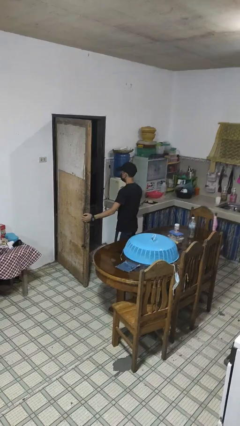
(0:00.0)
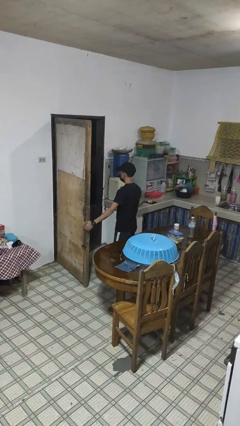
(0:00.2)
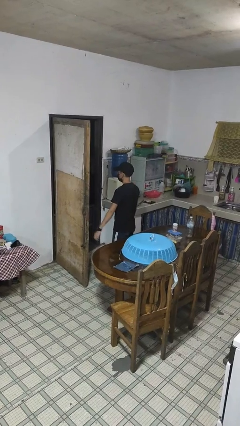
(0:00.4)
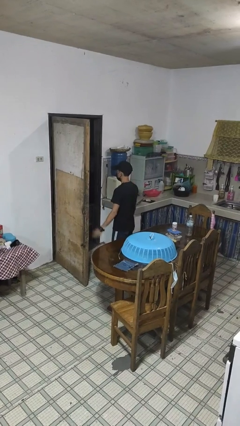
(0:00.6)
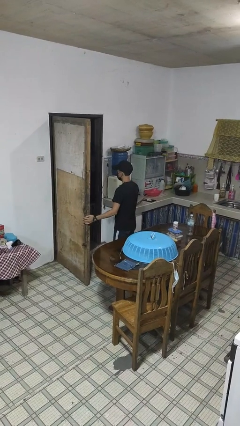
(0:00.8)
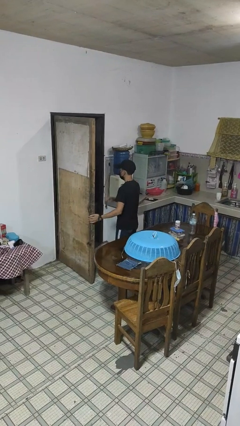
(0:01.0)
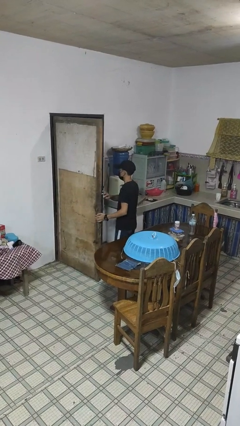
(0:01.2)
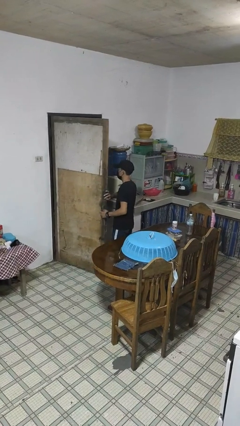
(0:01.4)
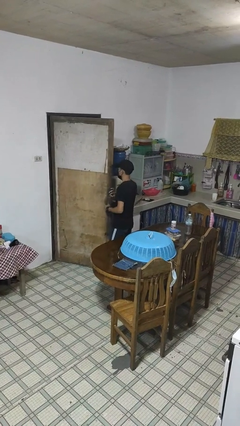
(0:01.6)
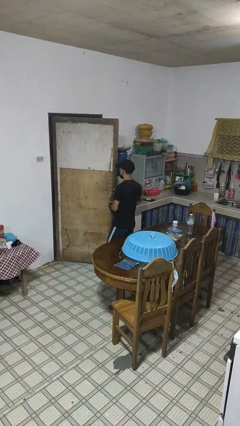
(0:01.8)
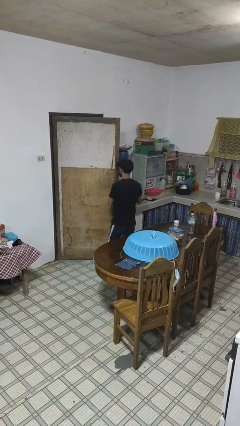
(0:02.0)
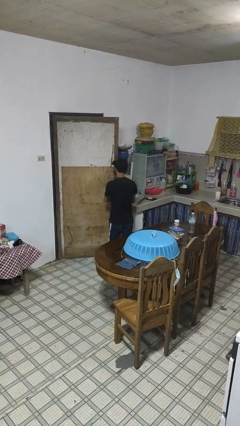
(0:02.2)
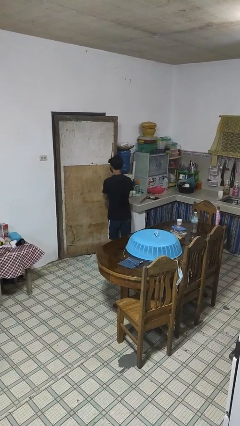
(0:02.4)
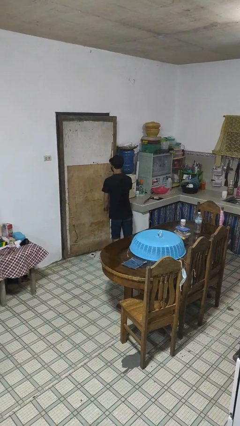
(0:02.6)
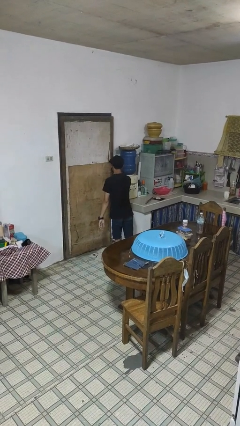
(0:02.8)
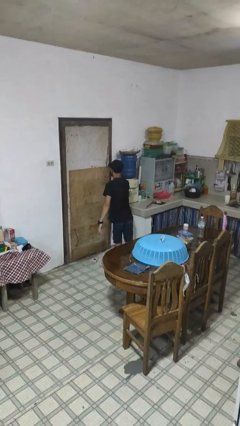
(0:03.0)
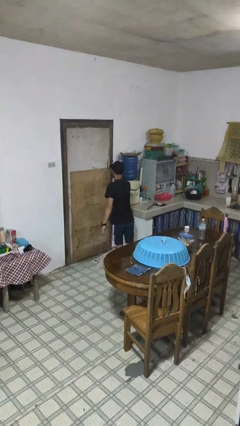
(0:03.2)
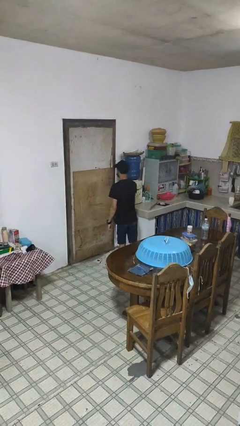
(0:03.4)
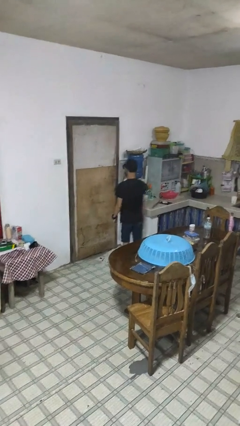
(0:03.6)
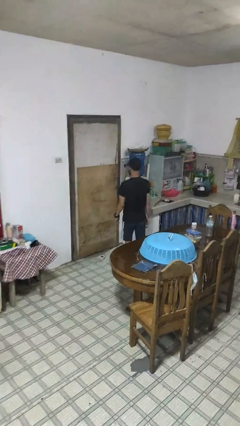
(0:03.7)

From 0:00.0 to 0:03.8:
person closes facility door

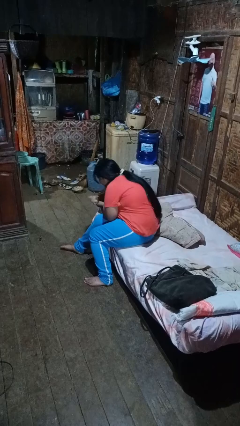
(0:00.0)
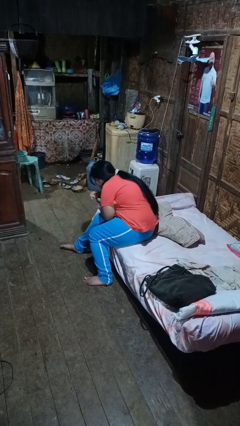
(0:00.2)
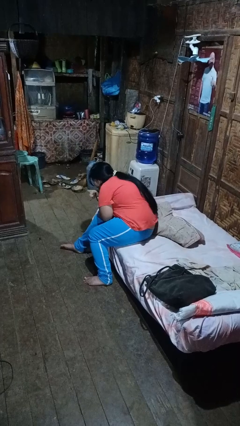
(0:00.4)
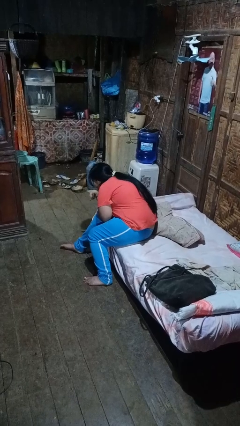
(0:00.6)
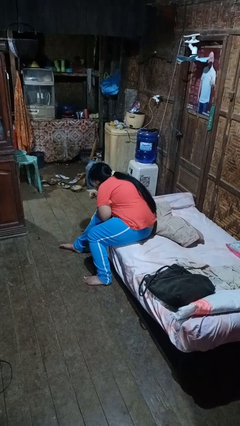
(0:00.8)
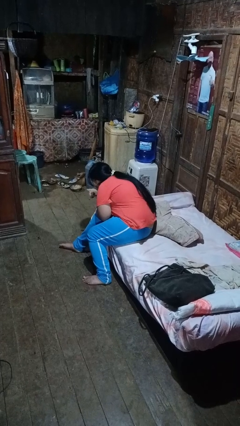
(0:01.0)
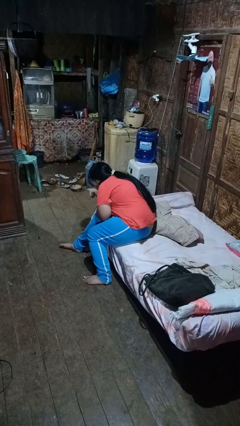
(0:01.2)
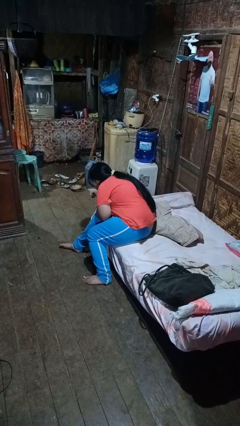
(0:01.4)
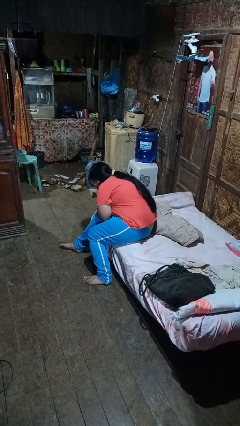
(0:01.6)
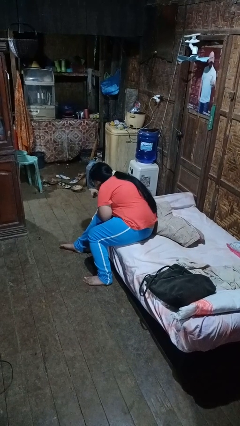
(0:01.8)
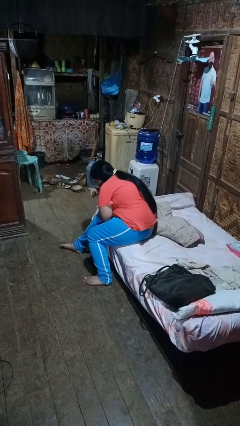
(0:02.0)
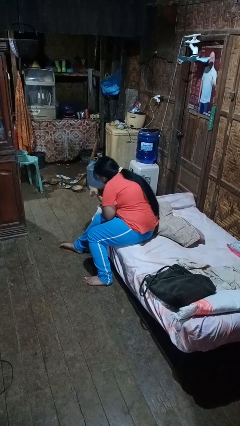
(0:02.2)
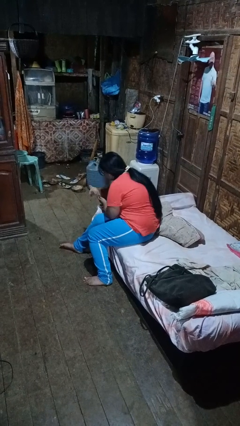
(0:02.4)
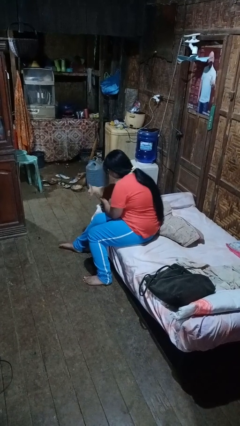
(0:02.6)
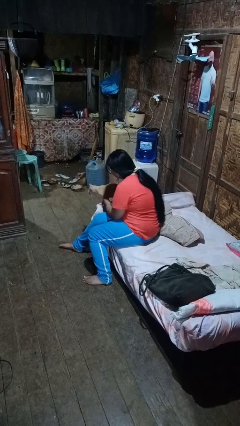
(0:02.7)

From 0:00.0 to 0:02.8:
person hugs cat

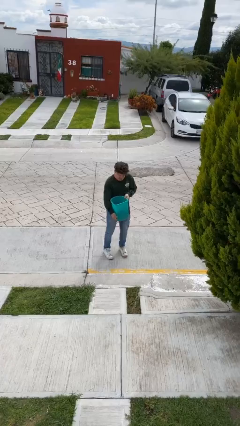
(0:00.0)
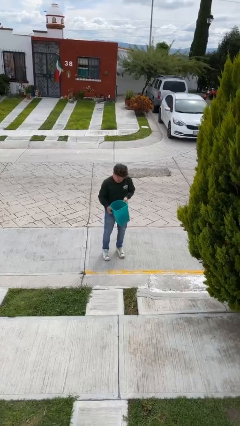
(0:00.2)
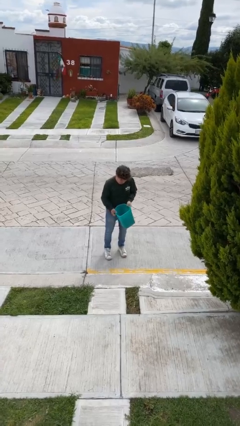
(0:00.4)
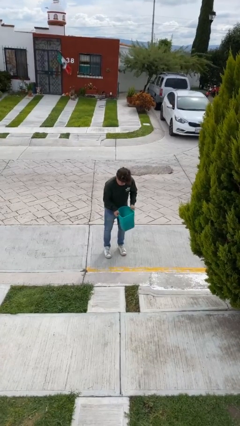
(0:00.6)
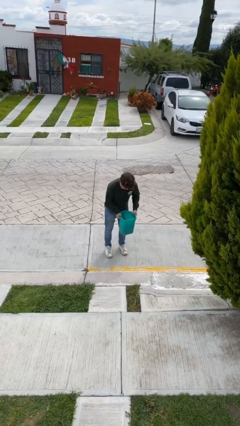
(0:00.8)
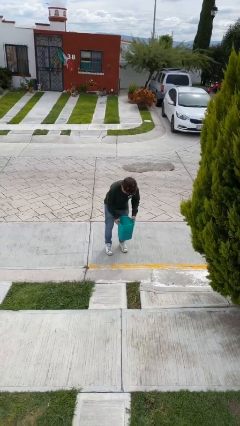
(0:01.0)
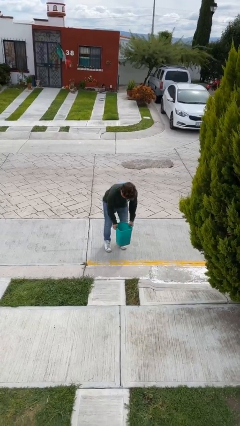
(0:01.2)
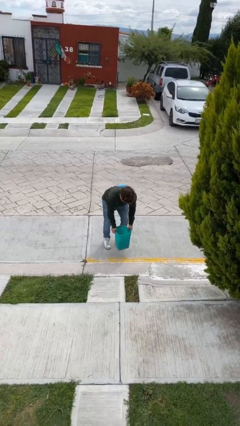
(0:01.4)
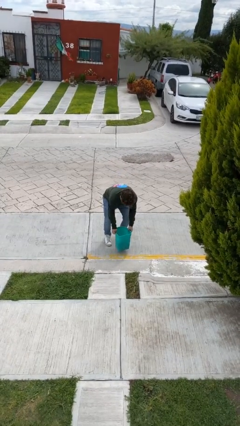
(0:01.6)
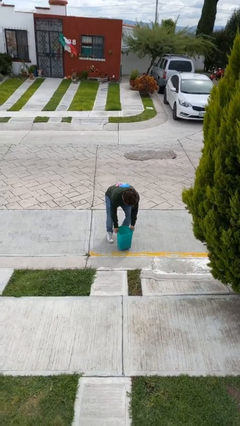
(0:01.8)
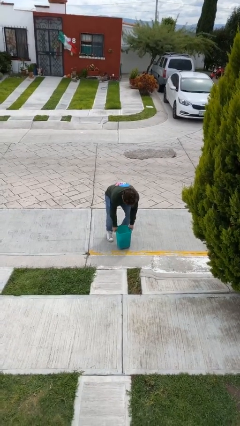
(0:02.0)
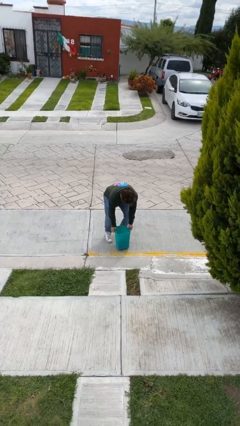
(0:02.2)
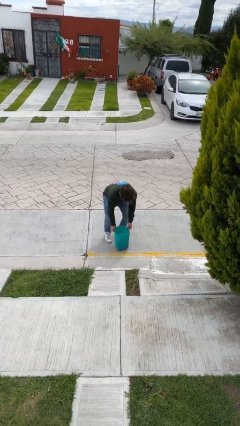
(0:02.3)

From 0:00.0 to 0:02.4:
person puts down object on floor

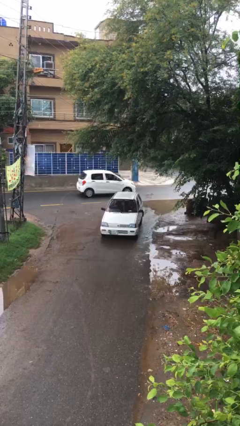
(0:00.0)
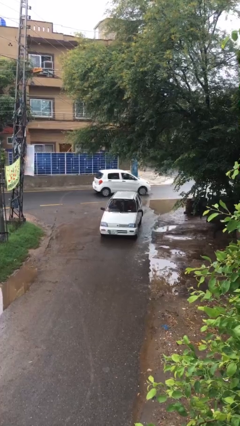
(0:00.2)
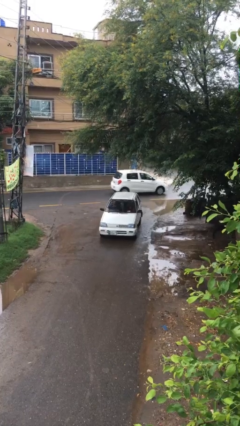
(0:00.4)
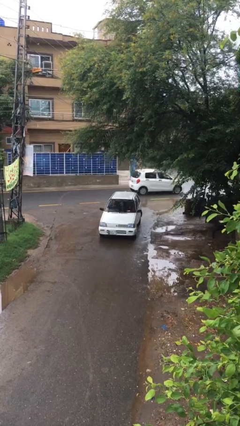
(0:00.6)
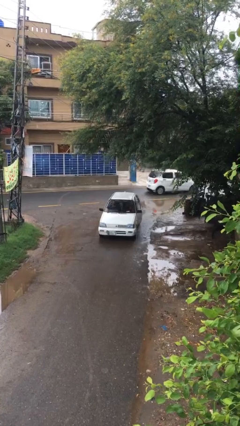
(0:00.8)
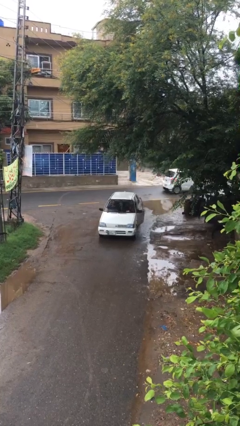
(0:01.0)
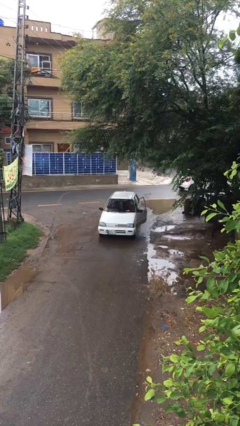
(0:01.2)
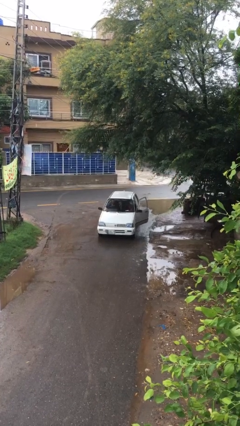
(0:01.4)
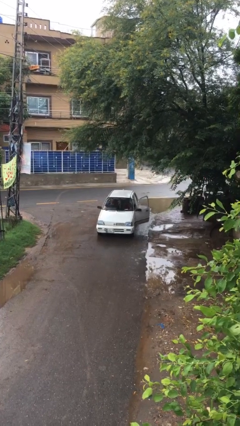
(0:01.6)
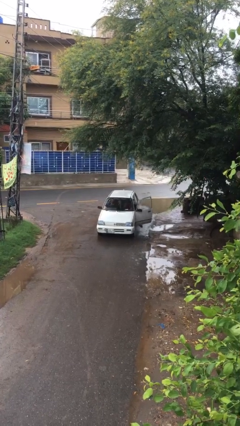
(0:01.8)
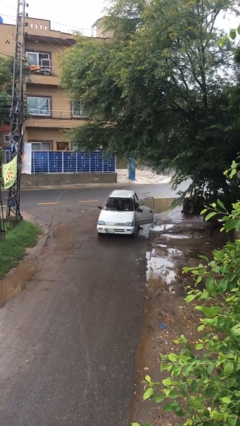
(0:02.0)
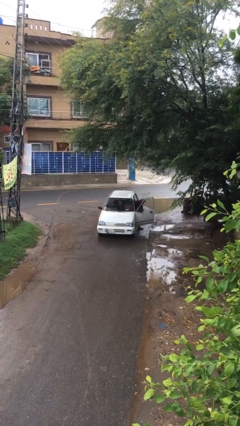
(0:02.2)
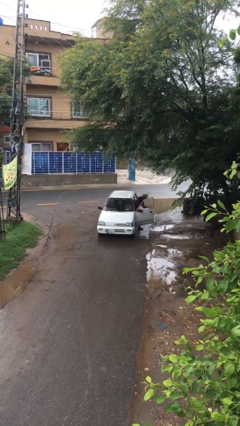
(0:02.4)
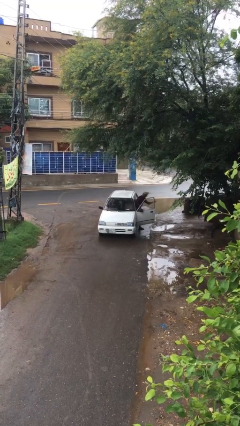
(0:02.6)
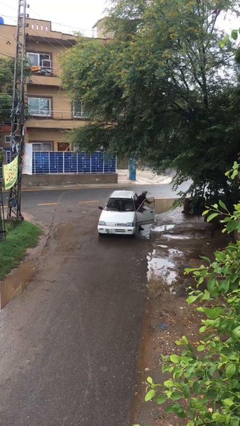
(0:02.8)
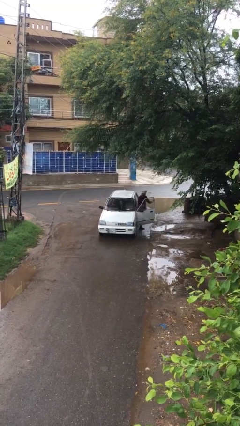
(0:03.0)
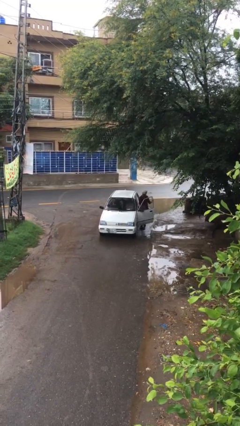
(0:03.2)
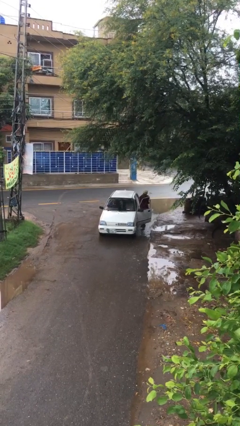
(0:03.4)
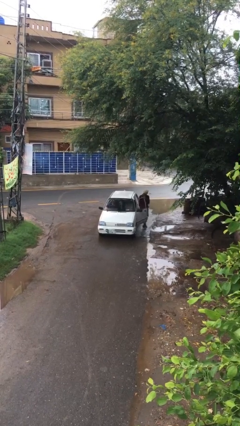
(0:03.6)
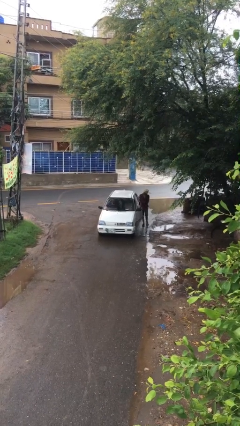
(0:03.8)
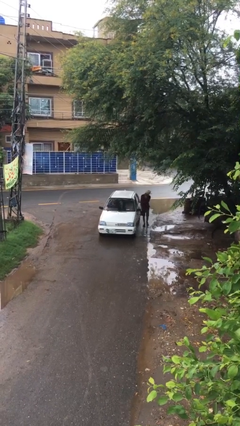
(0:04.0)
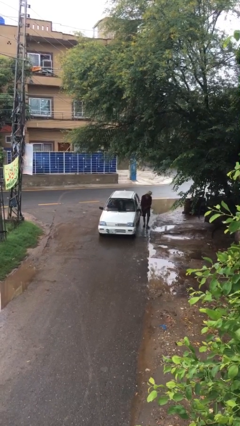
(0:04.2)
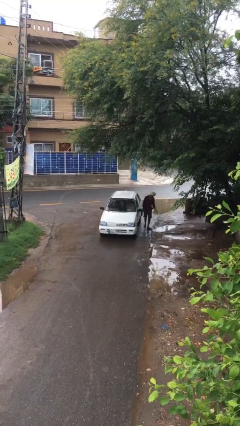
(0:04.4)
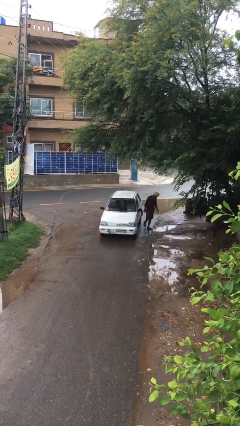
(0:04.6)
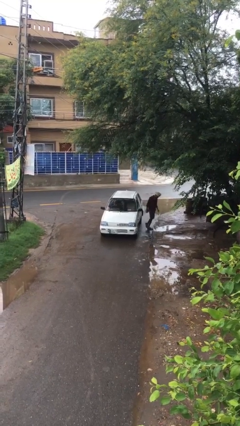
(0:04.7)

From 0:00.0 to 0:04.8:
car drops off person

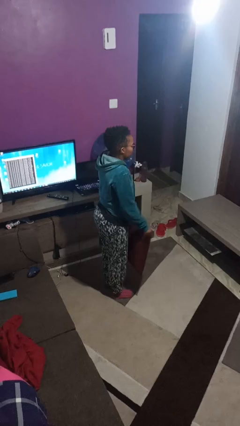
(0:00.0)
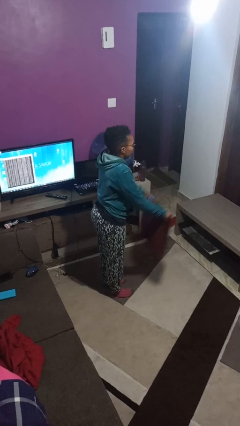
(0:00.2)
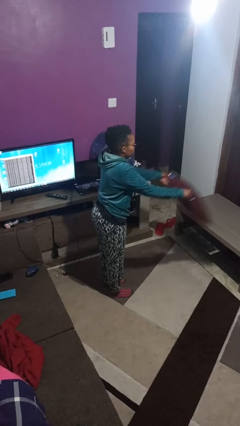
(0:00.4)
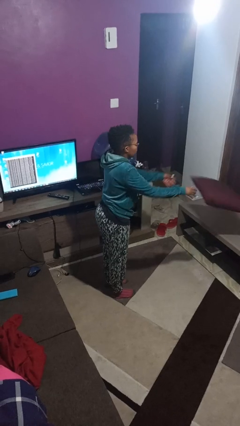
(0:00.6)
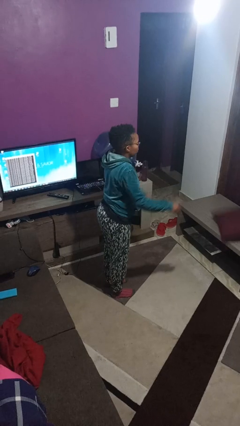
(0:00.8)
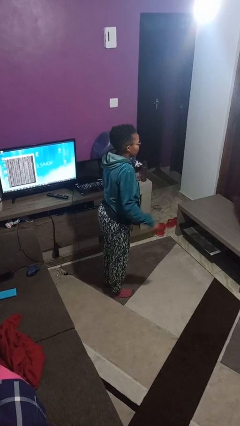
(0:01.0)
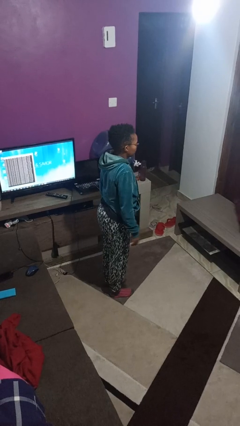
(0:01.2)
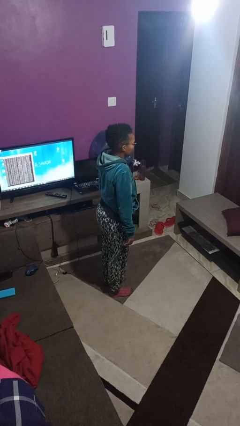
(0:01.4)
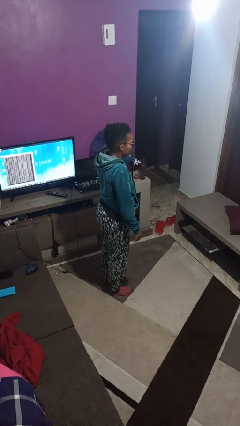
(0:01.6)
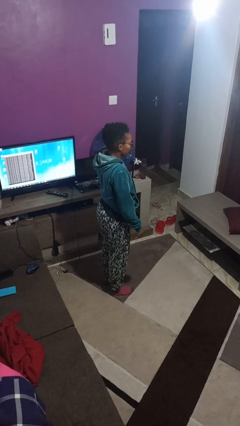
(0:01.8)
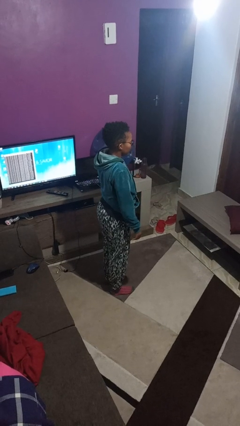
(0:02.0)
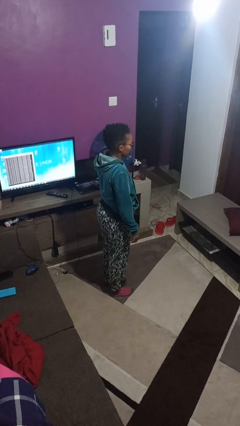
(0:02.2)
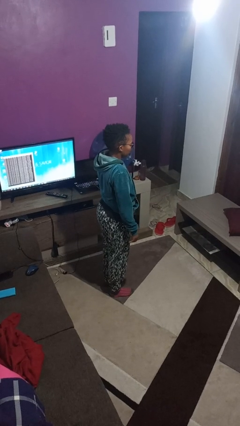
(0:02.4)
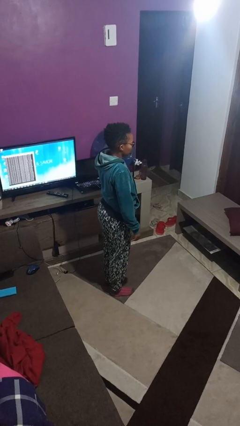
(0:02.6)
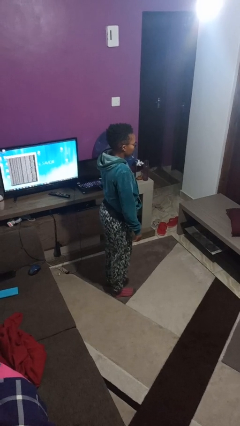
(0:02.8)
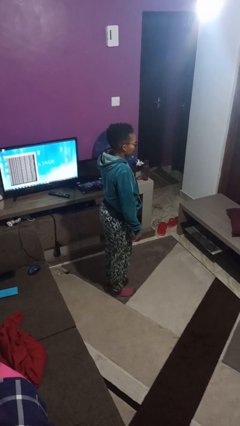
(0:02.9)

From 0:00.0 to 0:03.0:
person throws object on table

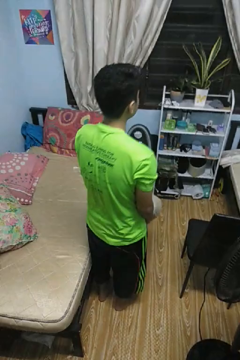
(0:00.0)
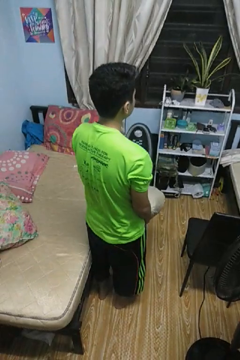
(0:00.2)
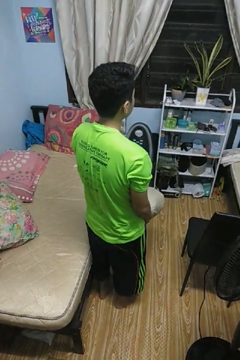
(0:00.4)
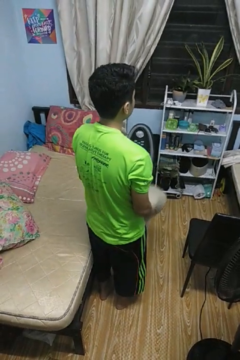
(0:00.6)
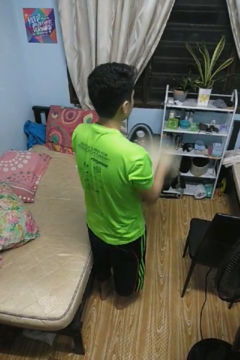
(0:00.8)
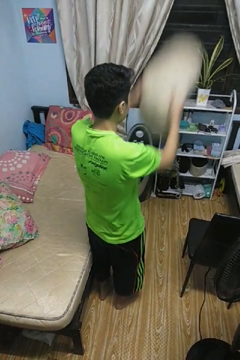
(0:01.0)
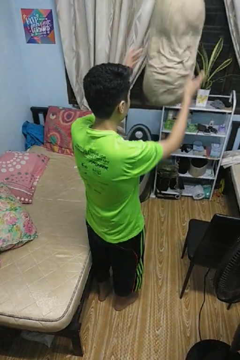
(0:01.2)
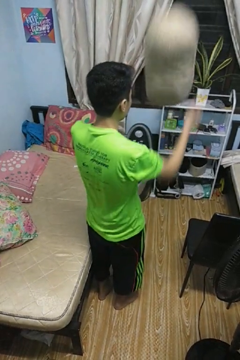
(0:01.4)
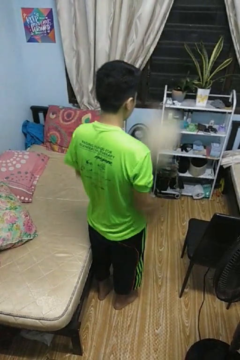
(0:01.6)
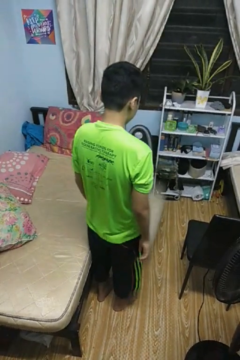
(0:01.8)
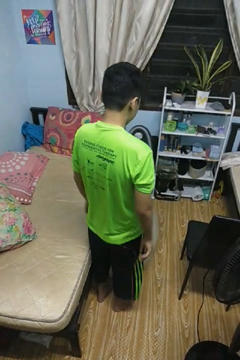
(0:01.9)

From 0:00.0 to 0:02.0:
person throws object into air
